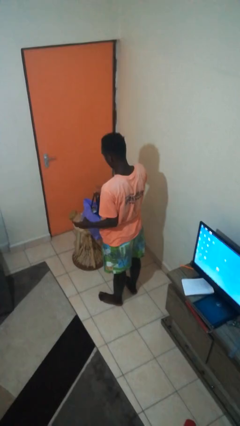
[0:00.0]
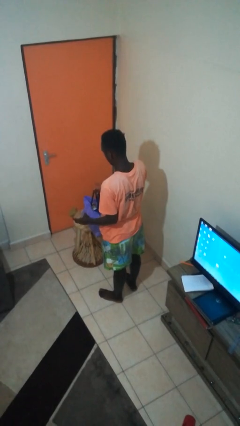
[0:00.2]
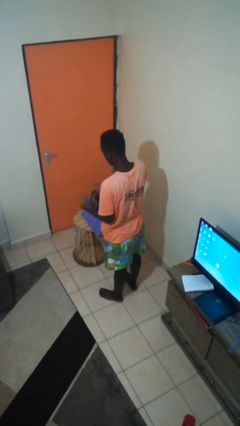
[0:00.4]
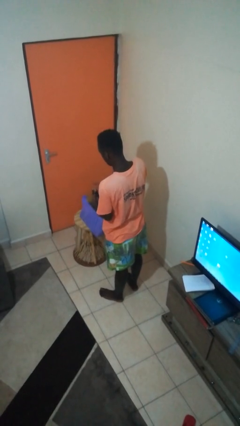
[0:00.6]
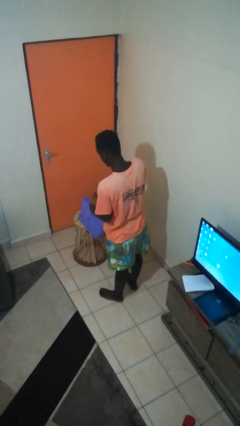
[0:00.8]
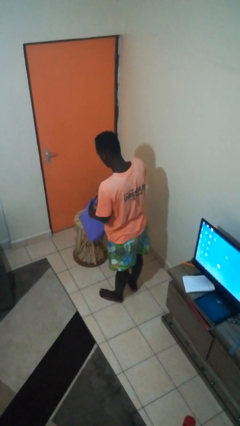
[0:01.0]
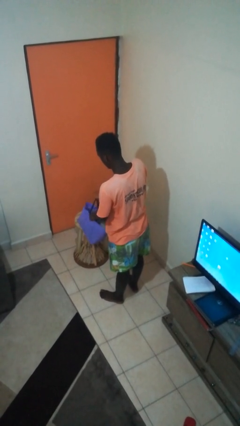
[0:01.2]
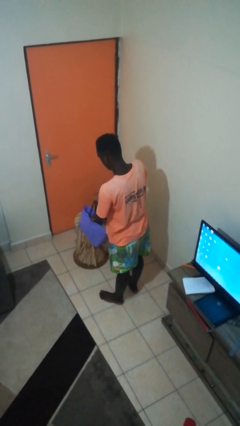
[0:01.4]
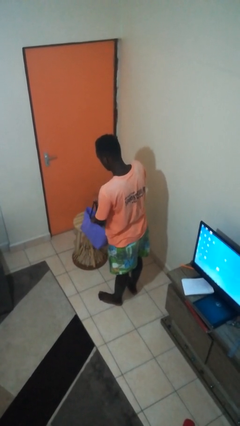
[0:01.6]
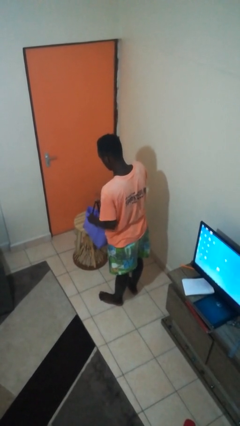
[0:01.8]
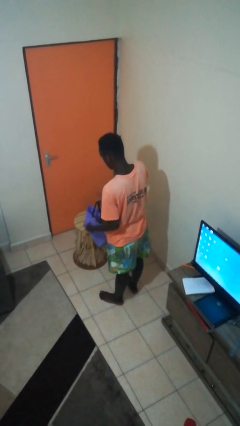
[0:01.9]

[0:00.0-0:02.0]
person puts object into bag

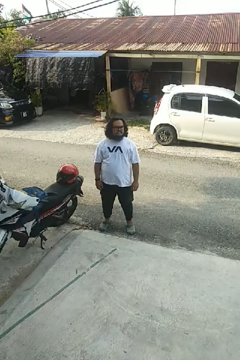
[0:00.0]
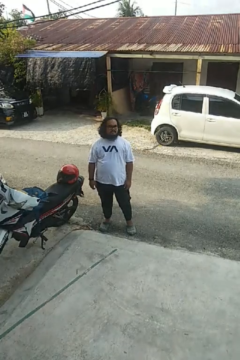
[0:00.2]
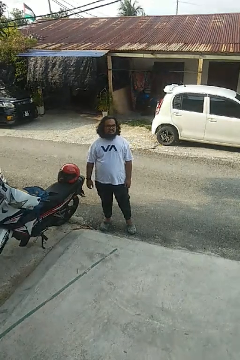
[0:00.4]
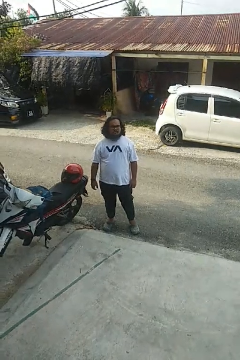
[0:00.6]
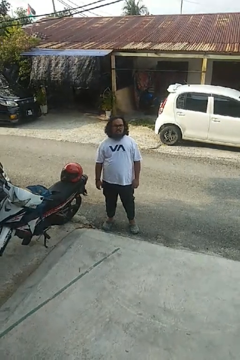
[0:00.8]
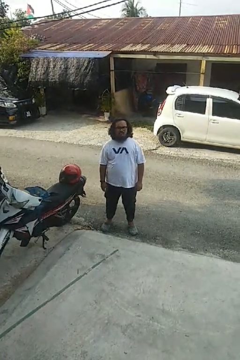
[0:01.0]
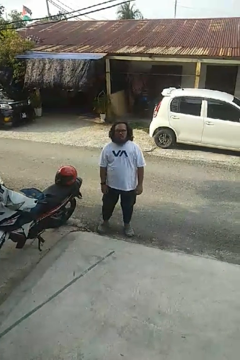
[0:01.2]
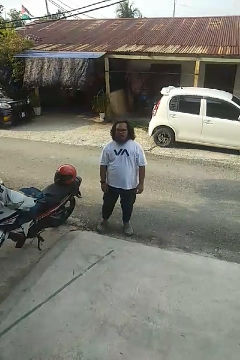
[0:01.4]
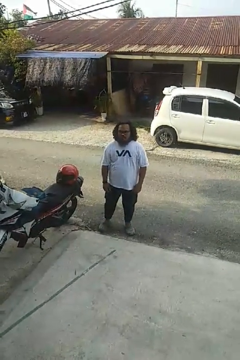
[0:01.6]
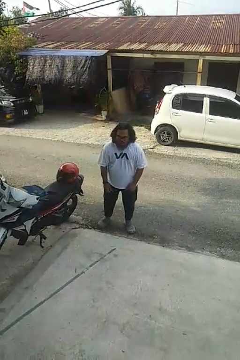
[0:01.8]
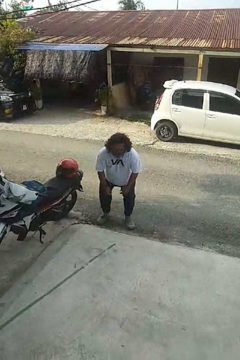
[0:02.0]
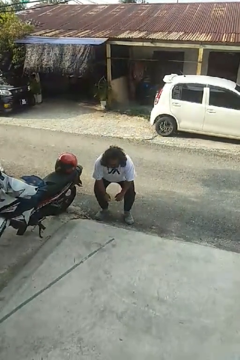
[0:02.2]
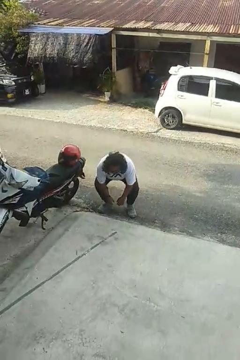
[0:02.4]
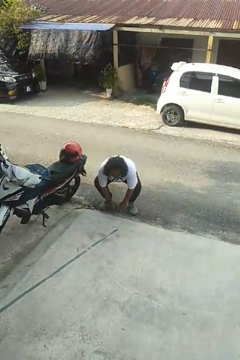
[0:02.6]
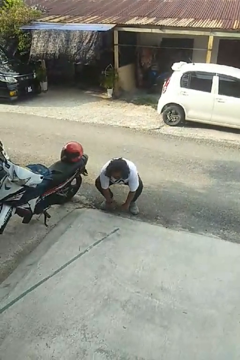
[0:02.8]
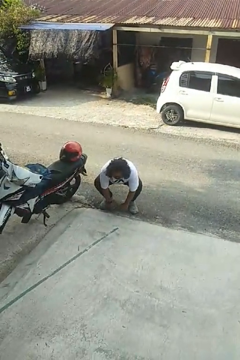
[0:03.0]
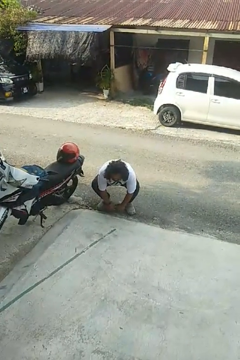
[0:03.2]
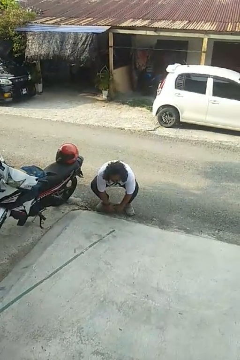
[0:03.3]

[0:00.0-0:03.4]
person squats

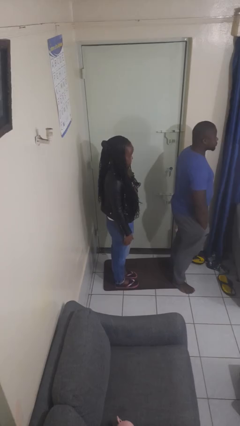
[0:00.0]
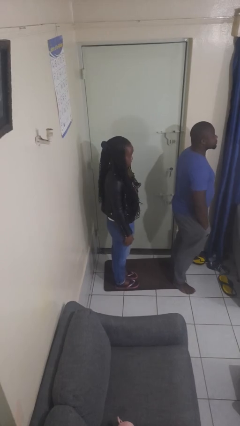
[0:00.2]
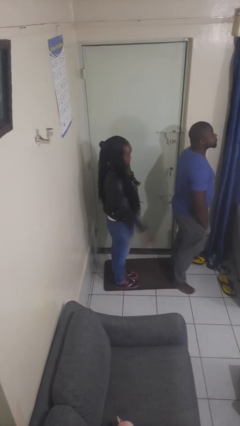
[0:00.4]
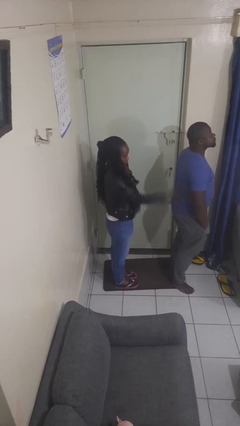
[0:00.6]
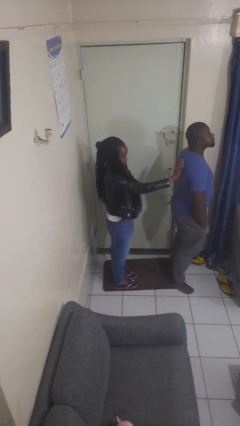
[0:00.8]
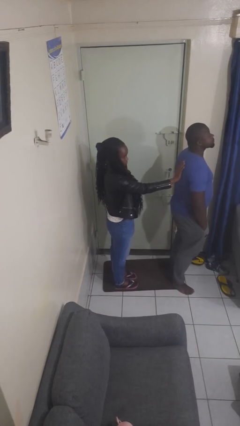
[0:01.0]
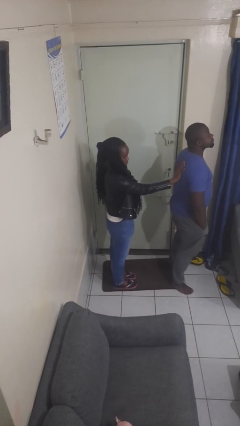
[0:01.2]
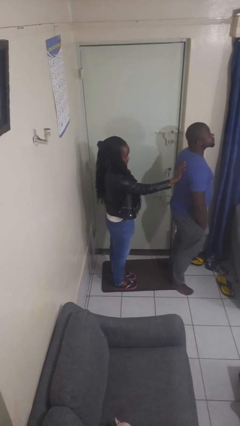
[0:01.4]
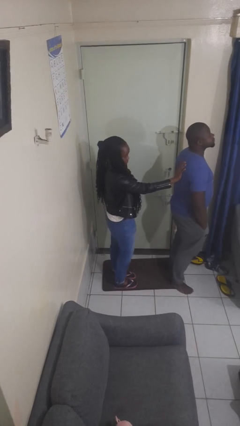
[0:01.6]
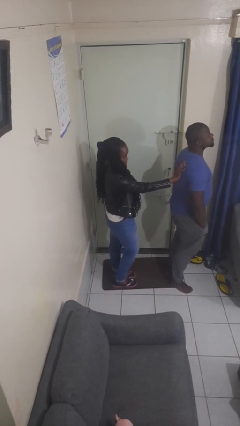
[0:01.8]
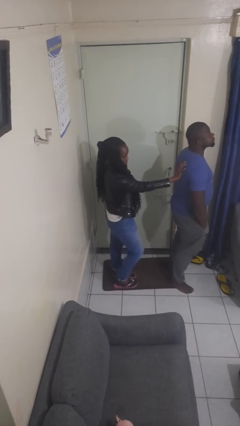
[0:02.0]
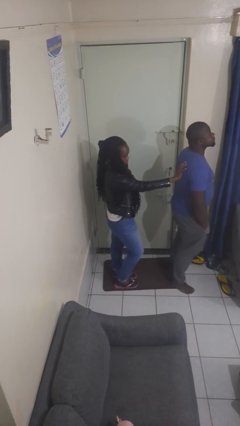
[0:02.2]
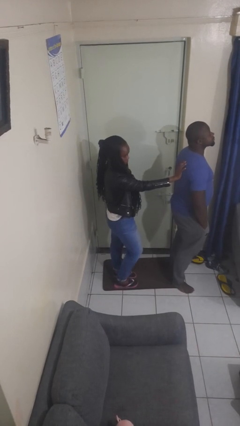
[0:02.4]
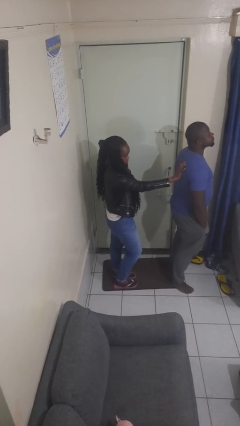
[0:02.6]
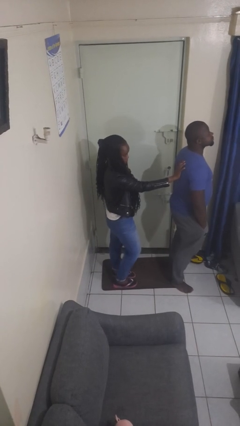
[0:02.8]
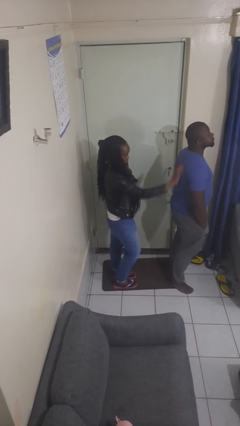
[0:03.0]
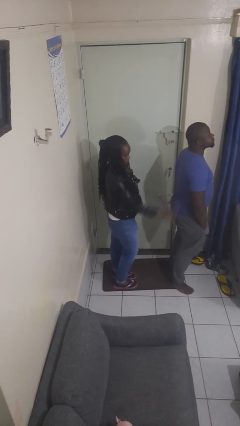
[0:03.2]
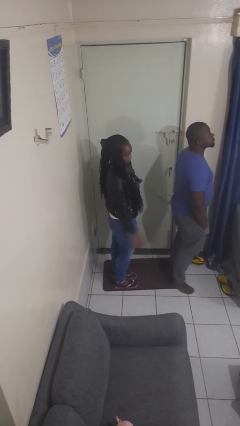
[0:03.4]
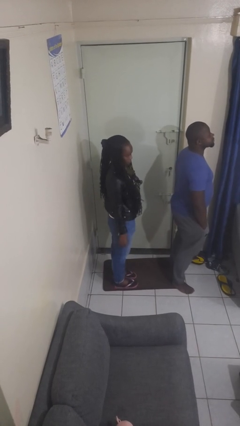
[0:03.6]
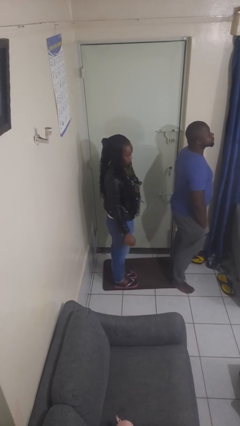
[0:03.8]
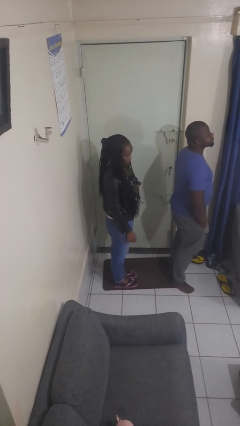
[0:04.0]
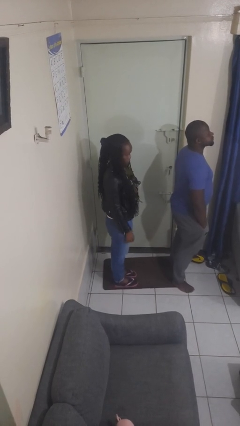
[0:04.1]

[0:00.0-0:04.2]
person touches back of person

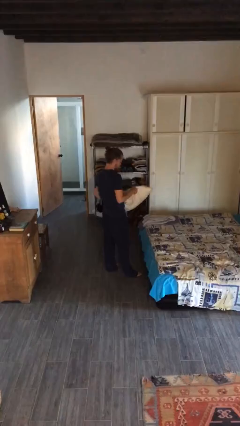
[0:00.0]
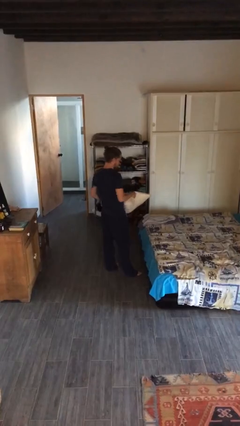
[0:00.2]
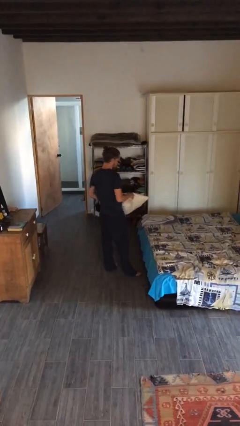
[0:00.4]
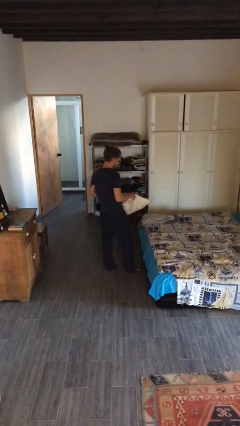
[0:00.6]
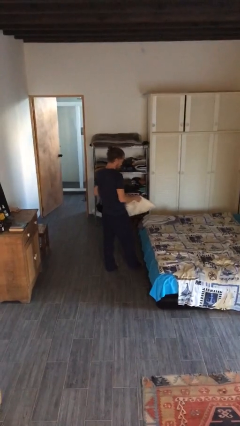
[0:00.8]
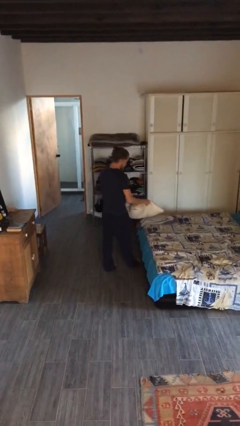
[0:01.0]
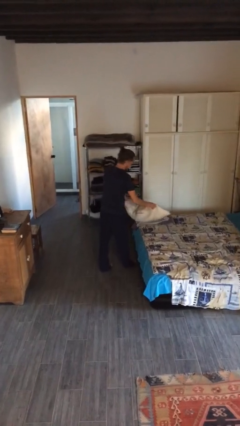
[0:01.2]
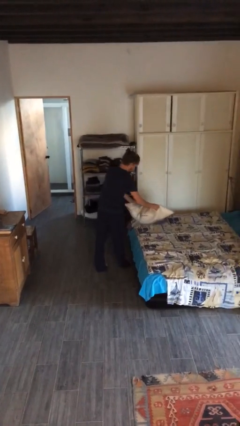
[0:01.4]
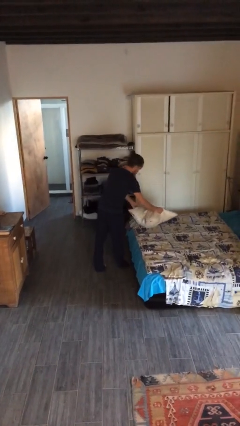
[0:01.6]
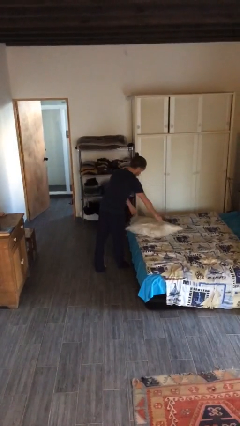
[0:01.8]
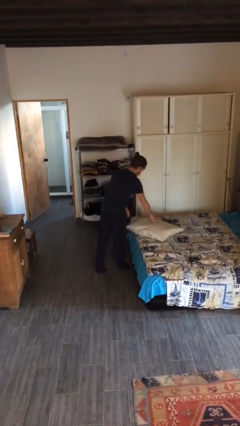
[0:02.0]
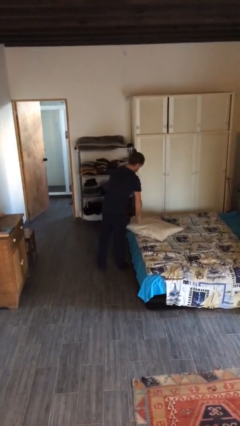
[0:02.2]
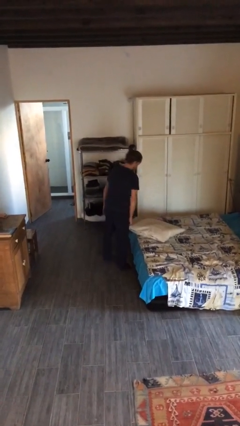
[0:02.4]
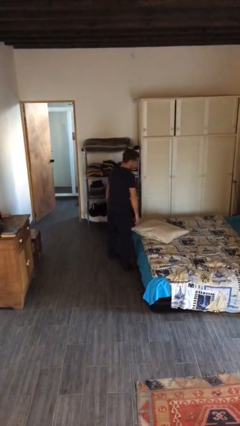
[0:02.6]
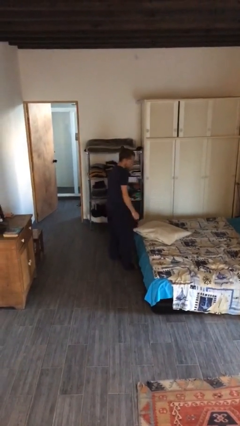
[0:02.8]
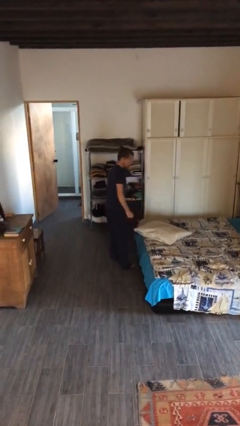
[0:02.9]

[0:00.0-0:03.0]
person puts down object on bed

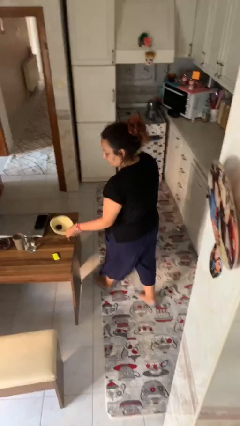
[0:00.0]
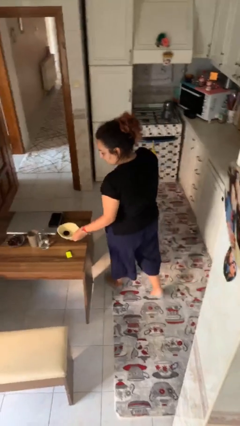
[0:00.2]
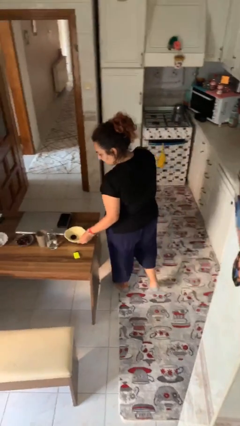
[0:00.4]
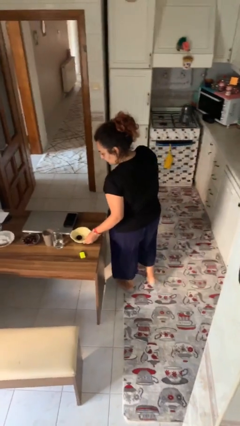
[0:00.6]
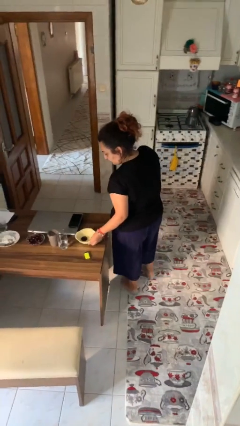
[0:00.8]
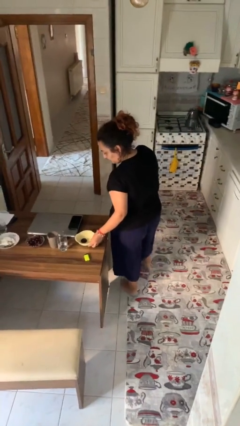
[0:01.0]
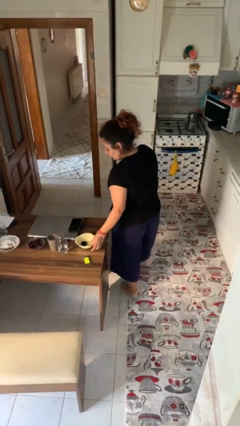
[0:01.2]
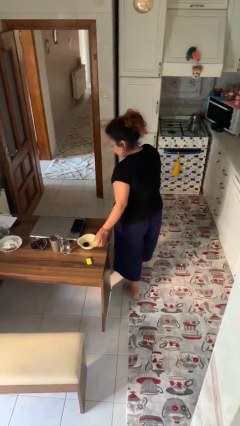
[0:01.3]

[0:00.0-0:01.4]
person puts down object on table

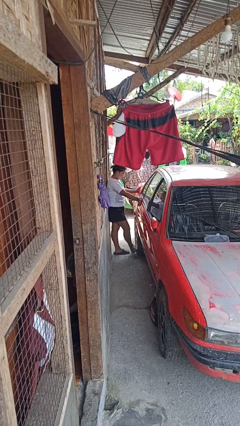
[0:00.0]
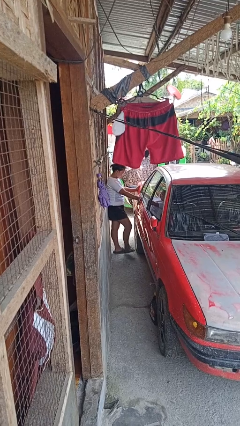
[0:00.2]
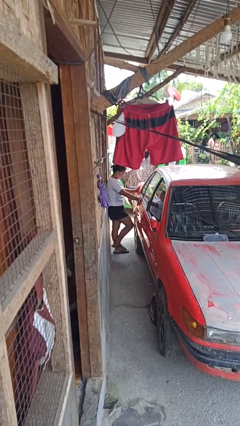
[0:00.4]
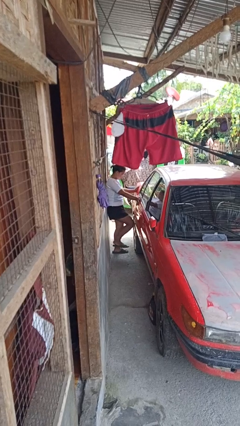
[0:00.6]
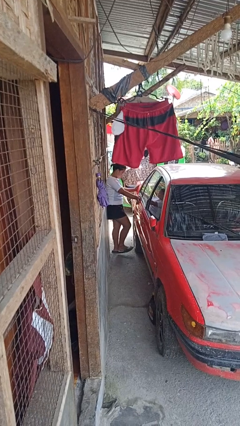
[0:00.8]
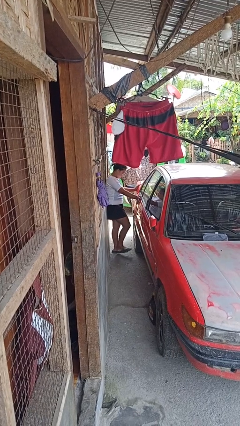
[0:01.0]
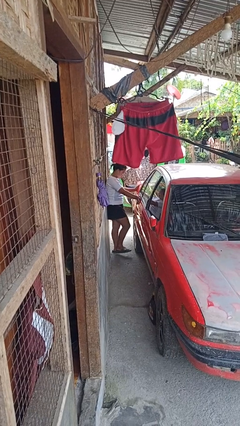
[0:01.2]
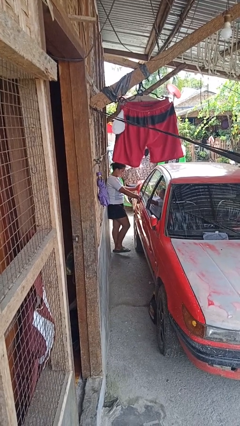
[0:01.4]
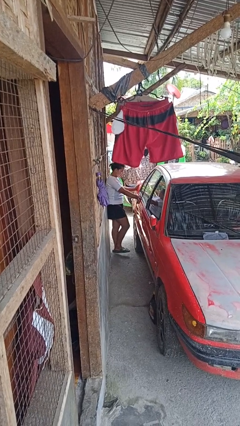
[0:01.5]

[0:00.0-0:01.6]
person kicks car tires

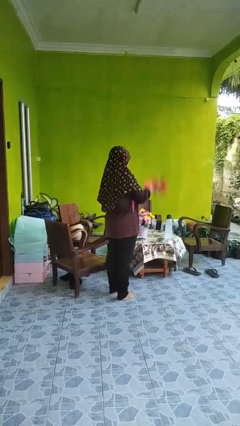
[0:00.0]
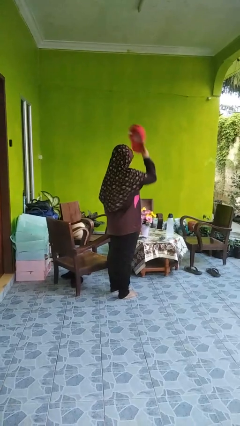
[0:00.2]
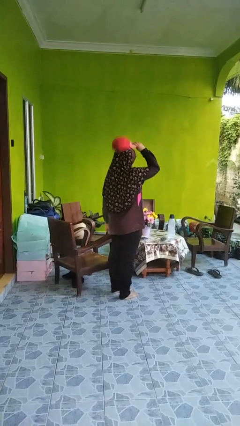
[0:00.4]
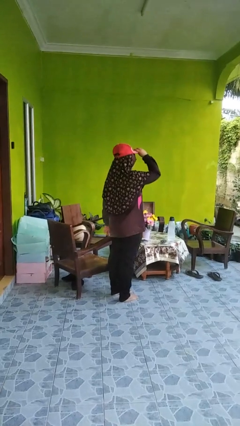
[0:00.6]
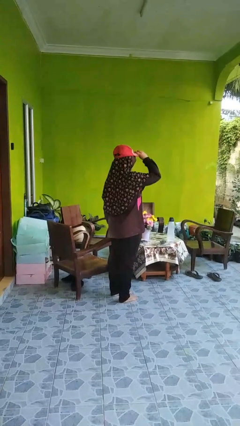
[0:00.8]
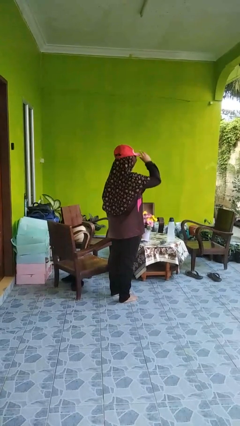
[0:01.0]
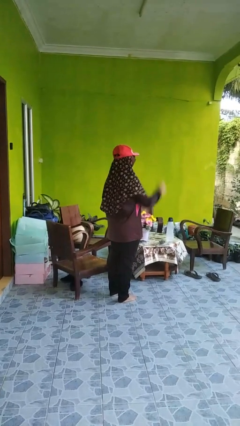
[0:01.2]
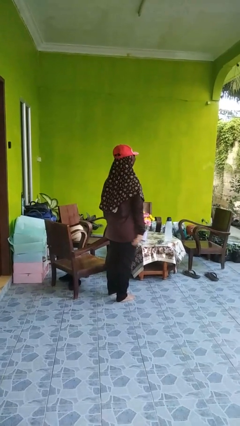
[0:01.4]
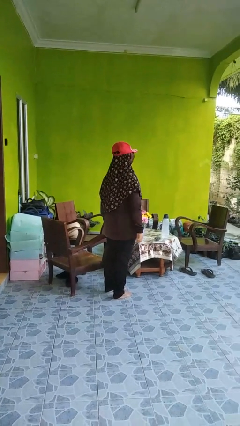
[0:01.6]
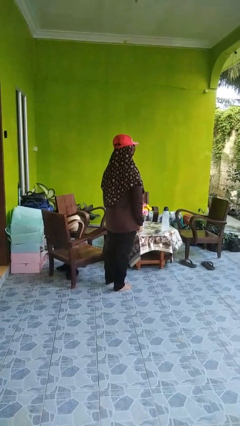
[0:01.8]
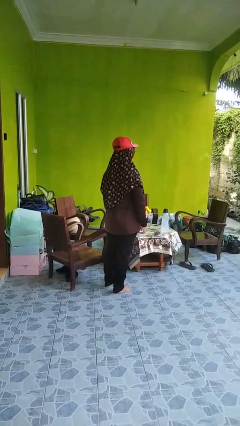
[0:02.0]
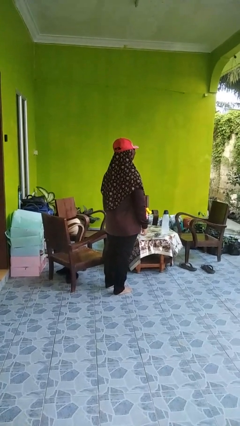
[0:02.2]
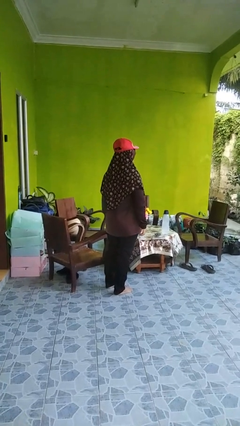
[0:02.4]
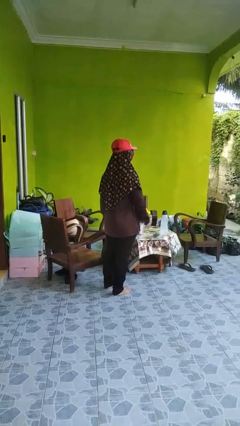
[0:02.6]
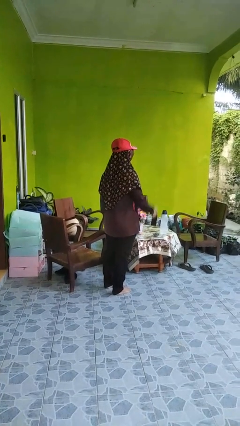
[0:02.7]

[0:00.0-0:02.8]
person puts on hat
